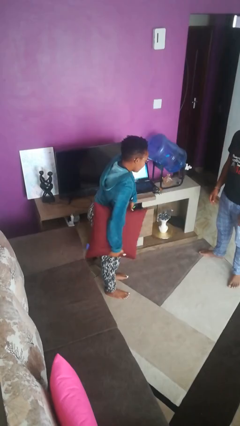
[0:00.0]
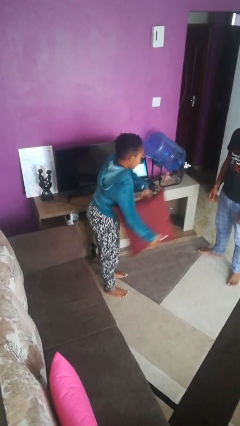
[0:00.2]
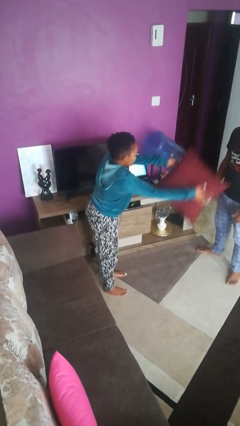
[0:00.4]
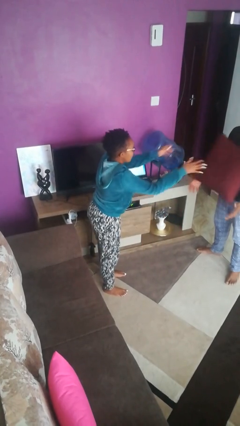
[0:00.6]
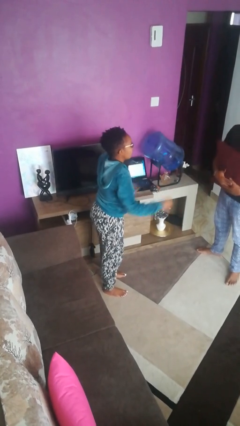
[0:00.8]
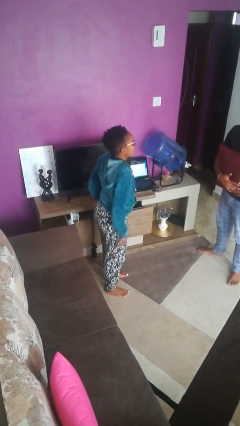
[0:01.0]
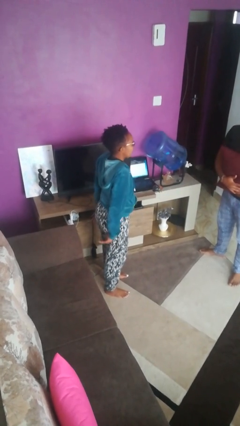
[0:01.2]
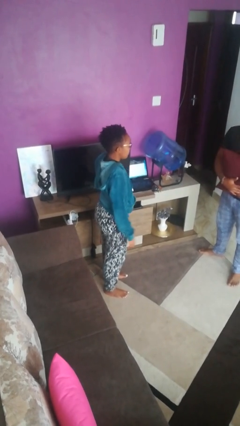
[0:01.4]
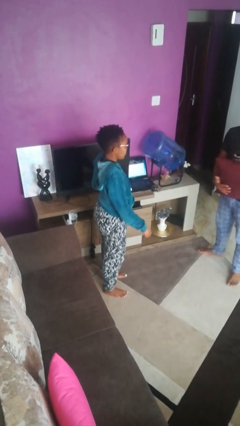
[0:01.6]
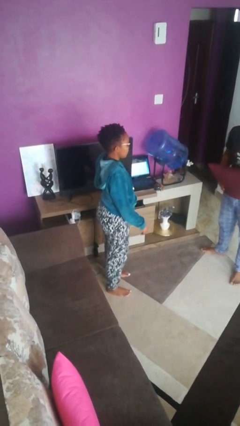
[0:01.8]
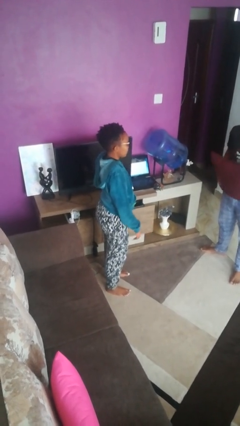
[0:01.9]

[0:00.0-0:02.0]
person throws object to person

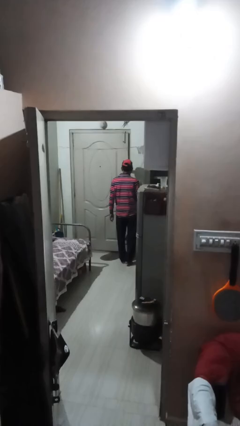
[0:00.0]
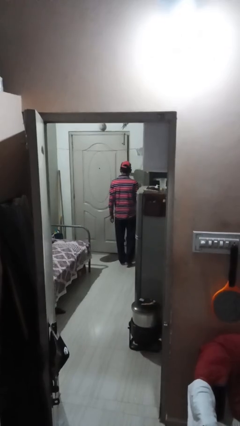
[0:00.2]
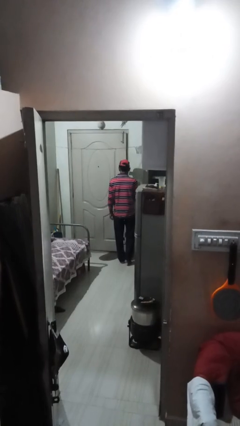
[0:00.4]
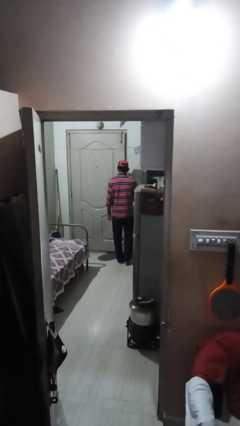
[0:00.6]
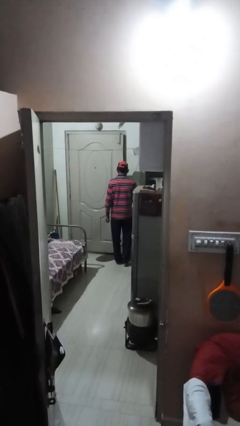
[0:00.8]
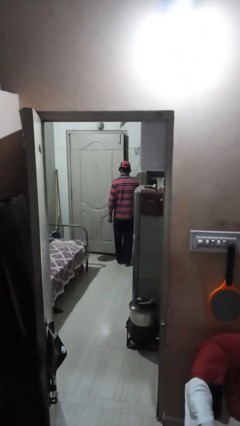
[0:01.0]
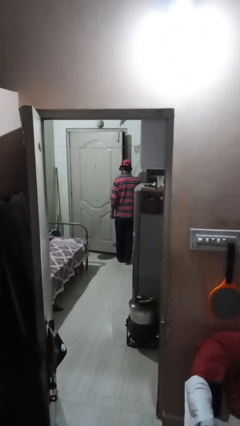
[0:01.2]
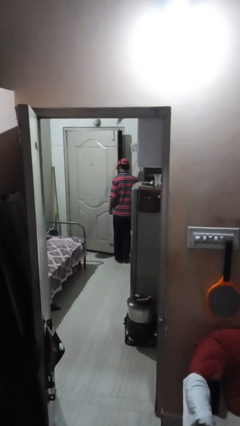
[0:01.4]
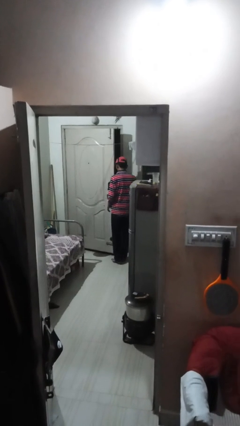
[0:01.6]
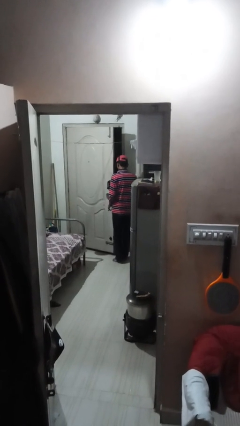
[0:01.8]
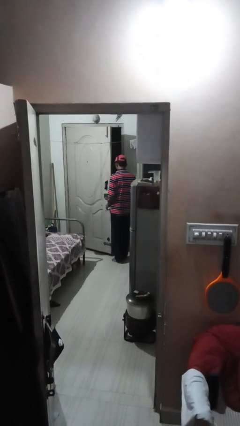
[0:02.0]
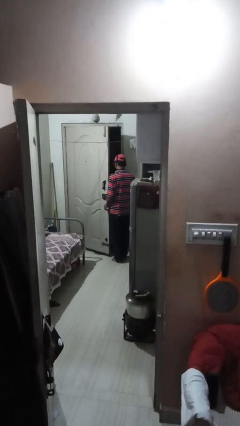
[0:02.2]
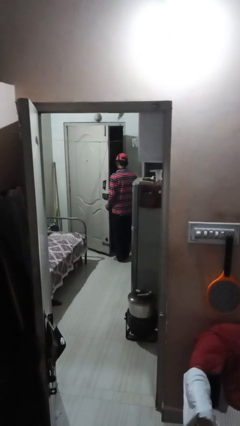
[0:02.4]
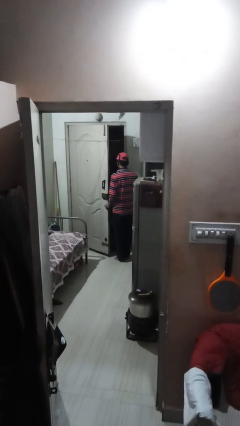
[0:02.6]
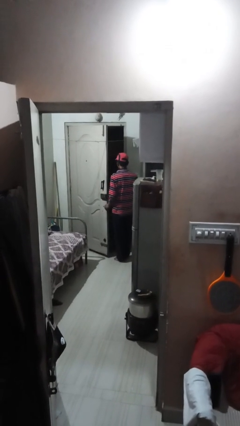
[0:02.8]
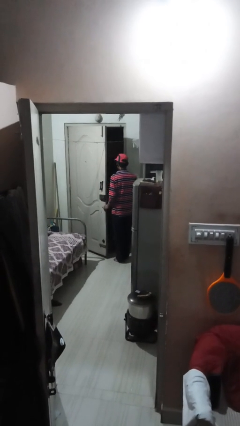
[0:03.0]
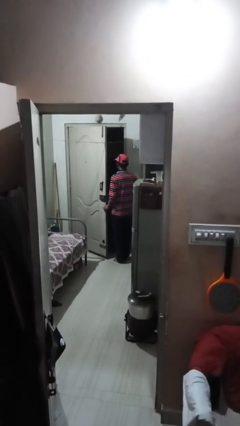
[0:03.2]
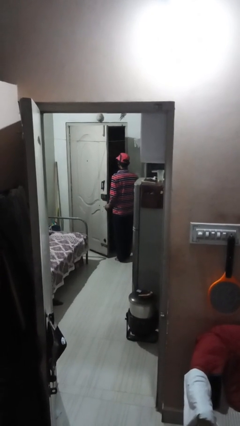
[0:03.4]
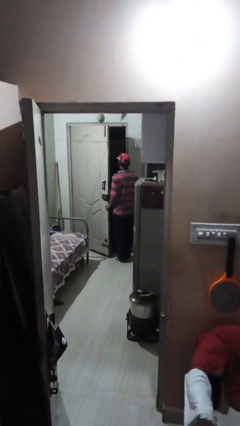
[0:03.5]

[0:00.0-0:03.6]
person opens facility door

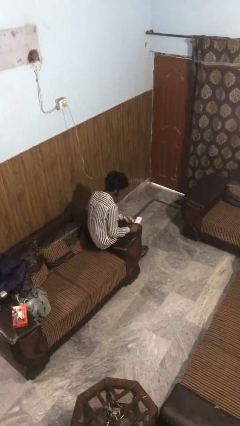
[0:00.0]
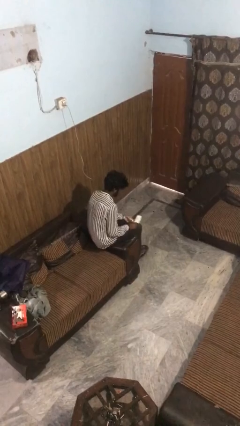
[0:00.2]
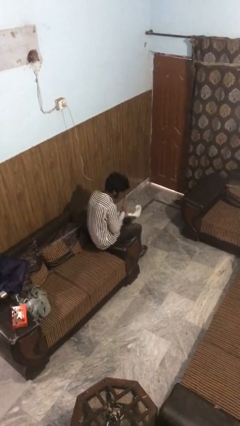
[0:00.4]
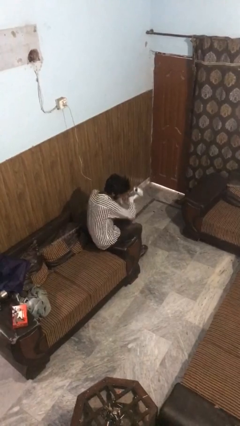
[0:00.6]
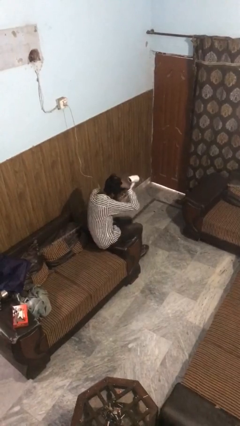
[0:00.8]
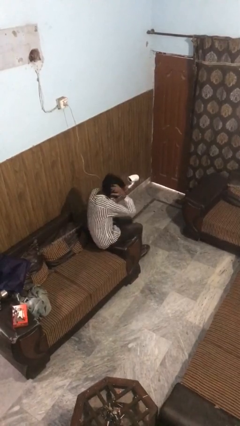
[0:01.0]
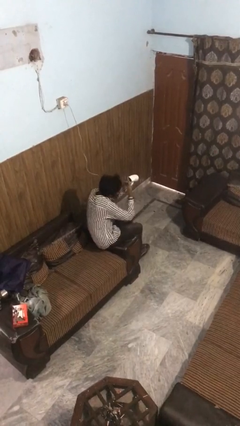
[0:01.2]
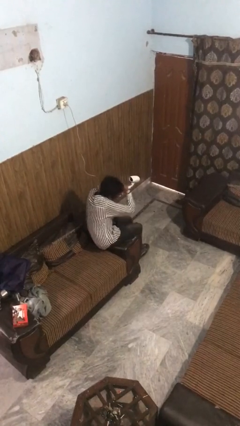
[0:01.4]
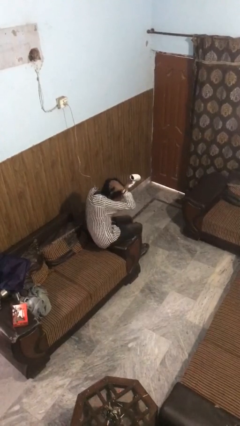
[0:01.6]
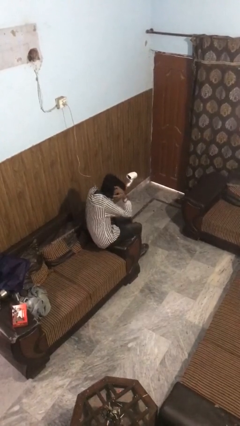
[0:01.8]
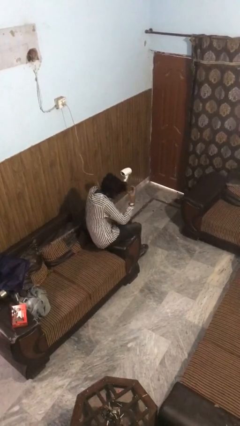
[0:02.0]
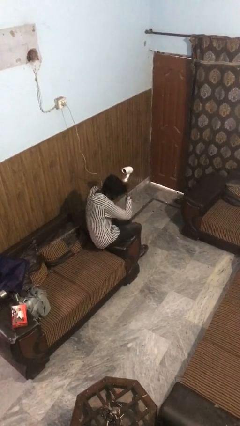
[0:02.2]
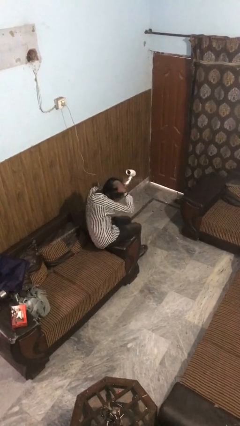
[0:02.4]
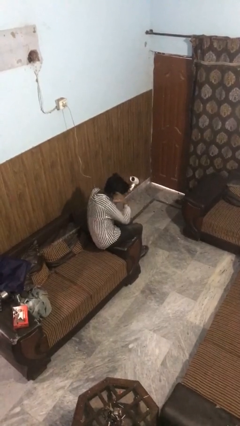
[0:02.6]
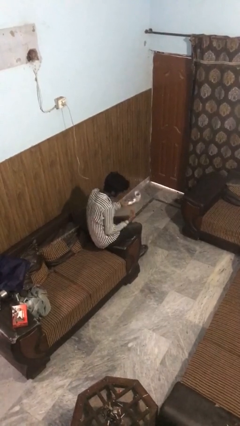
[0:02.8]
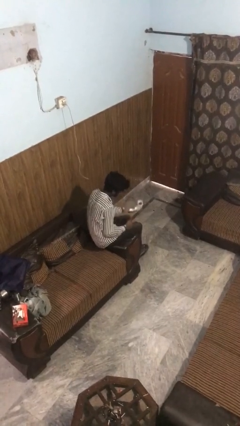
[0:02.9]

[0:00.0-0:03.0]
person dries hair with hairdryer

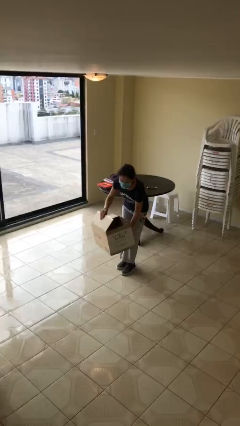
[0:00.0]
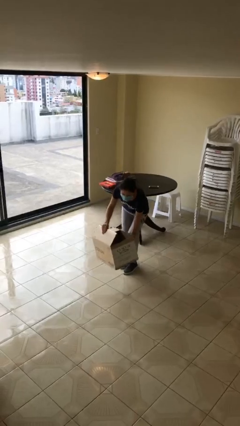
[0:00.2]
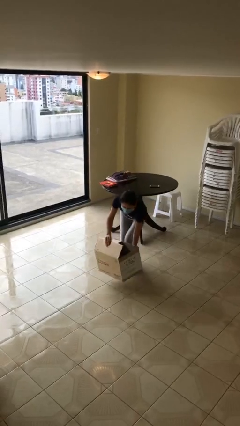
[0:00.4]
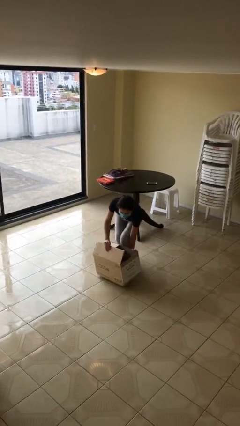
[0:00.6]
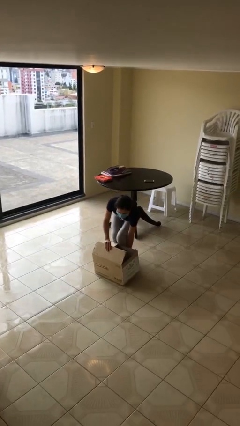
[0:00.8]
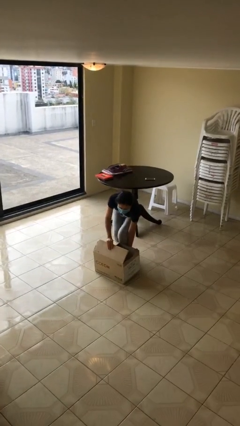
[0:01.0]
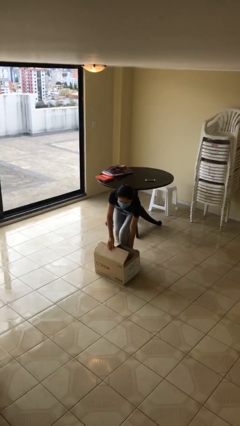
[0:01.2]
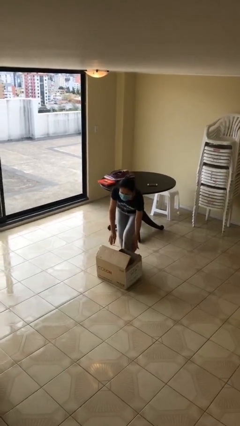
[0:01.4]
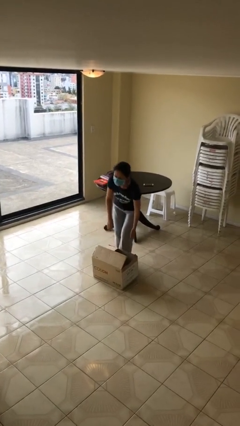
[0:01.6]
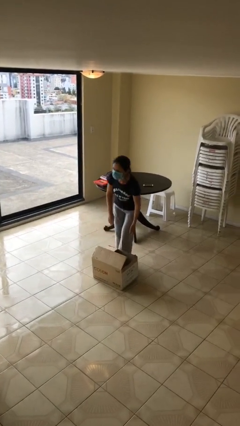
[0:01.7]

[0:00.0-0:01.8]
person puts down object on floor

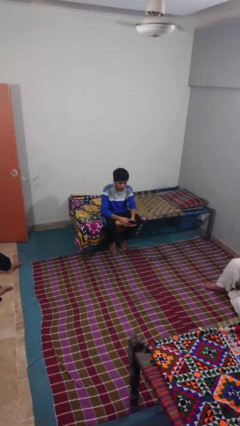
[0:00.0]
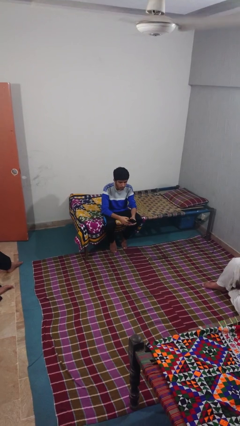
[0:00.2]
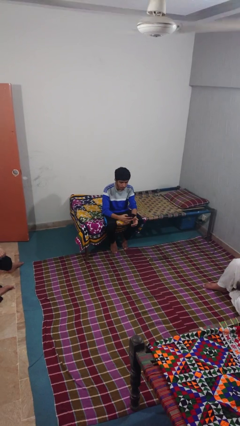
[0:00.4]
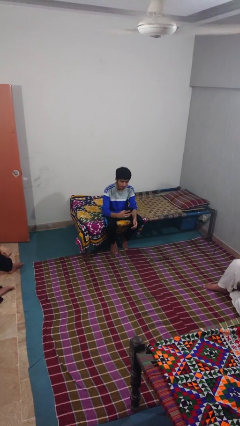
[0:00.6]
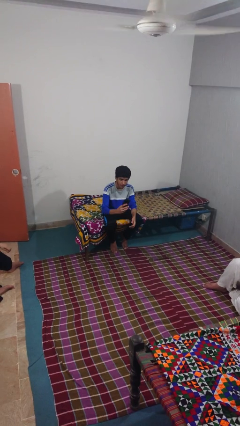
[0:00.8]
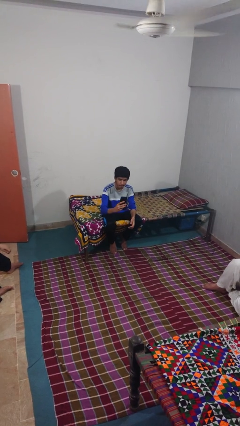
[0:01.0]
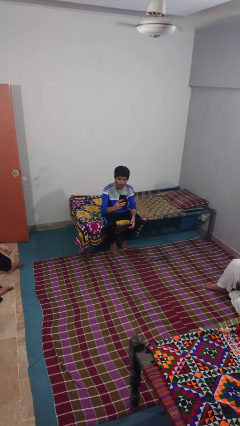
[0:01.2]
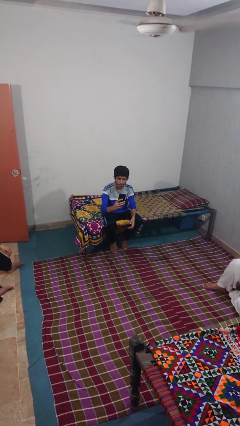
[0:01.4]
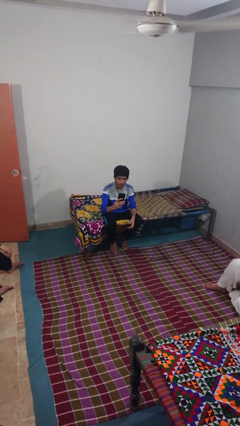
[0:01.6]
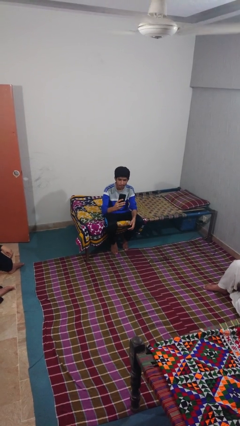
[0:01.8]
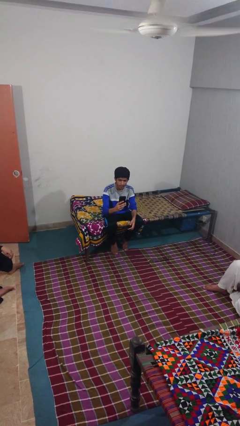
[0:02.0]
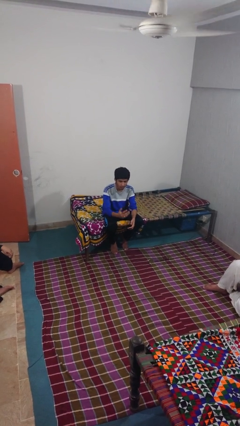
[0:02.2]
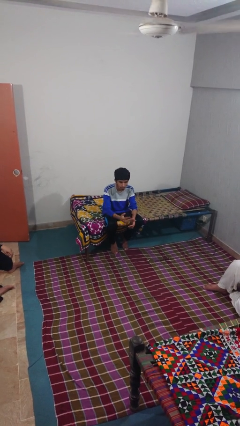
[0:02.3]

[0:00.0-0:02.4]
person takes selfie

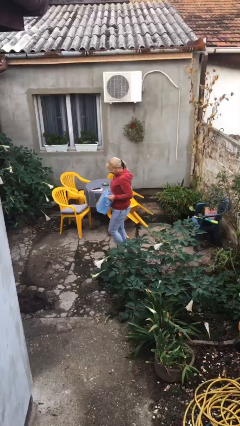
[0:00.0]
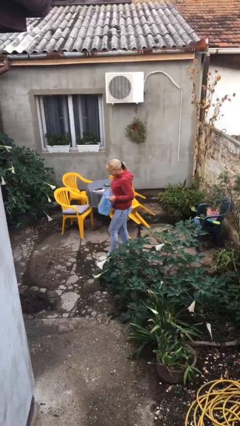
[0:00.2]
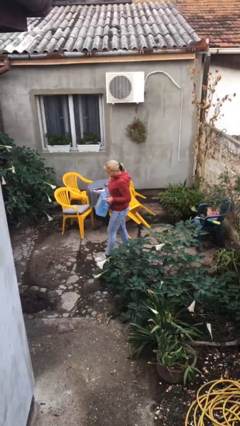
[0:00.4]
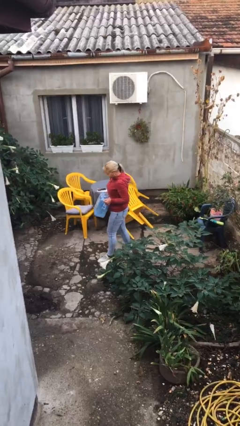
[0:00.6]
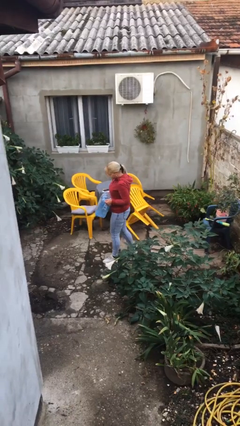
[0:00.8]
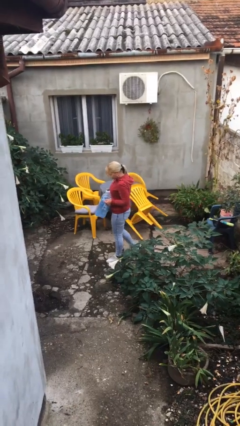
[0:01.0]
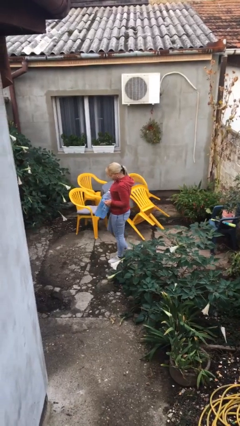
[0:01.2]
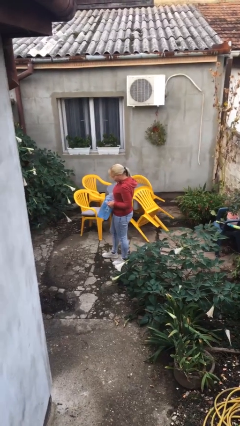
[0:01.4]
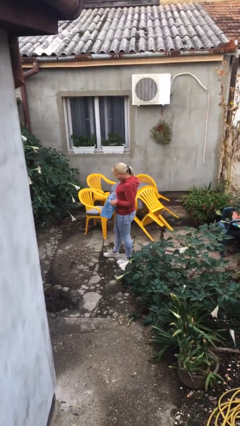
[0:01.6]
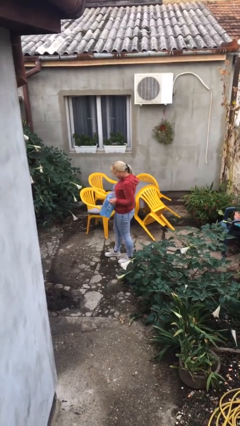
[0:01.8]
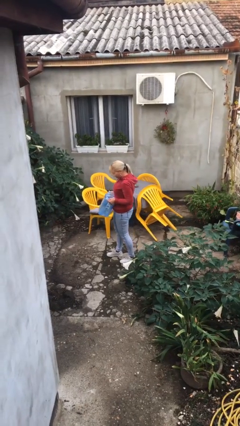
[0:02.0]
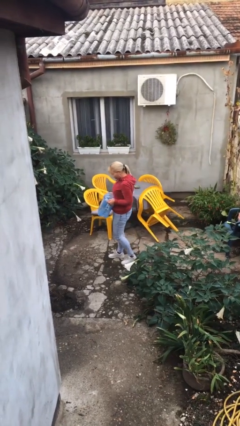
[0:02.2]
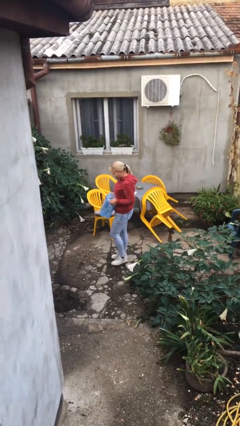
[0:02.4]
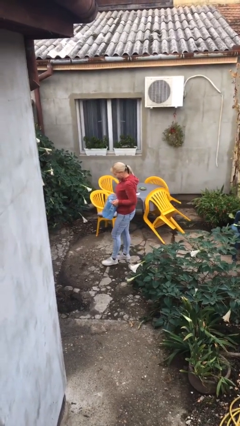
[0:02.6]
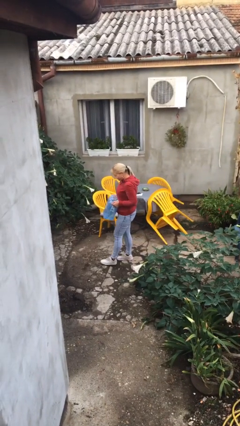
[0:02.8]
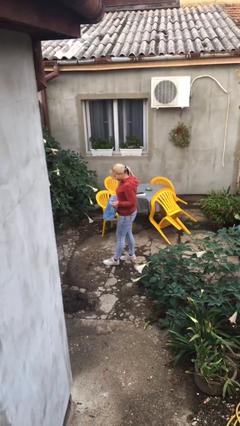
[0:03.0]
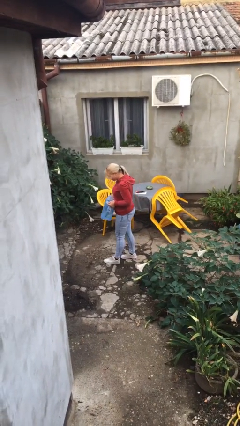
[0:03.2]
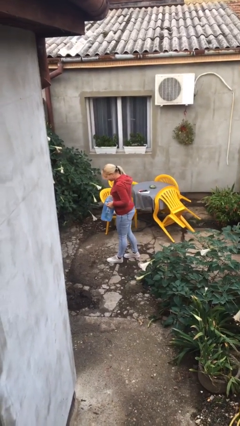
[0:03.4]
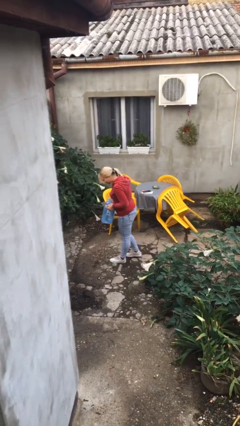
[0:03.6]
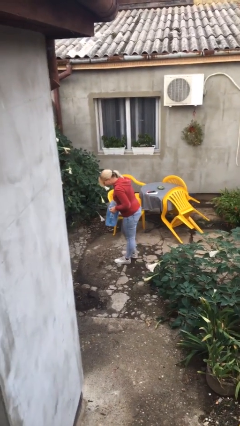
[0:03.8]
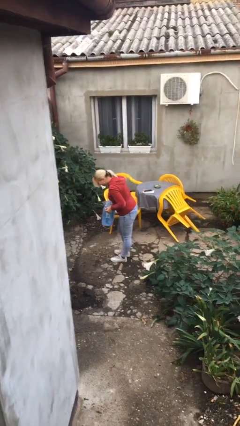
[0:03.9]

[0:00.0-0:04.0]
person carries heavy object

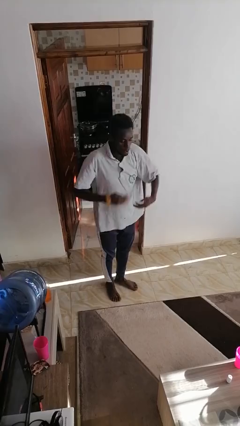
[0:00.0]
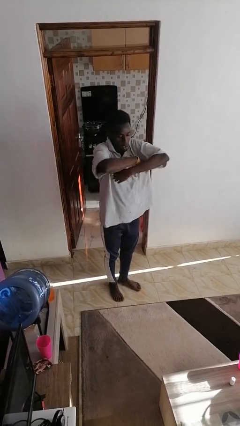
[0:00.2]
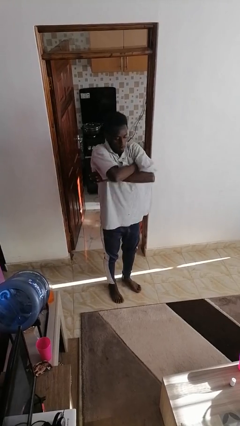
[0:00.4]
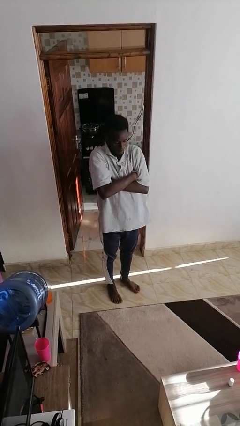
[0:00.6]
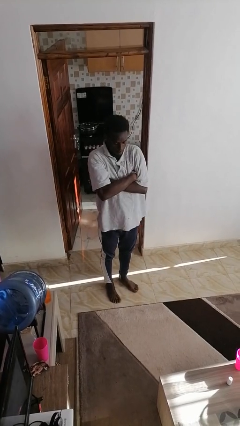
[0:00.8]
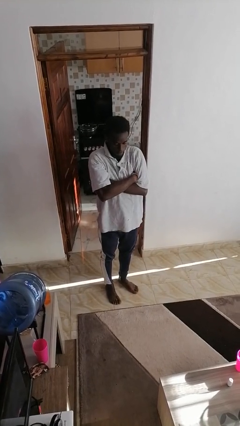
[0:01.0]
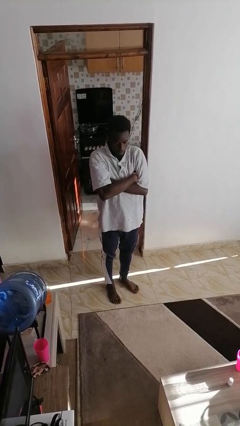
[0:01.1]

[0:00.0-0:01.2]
person crosses arms
